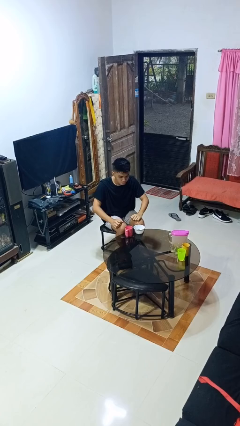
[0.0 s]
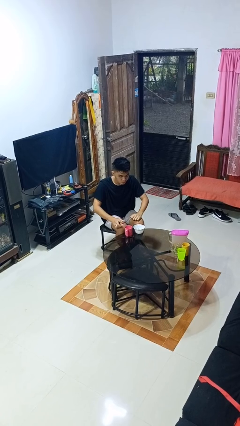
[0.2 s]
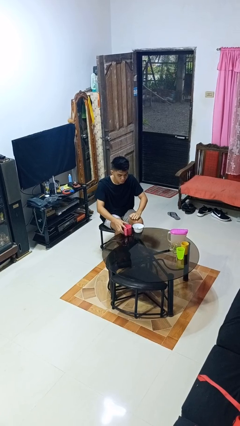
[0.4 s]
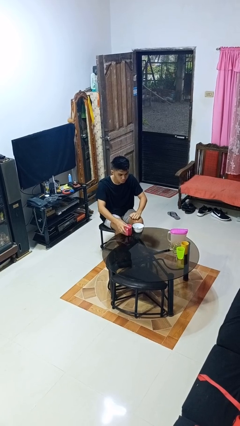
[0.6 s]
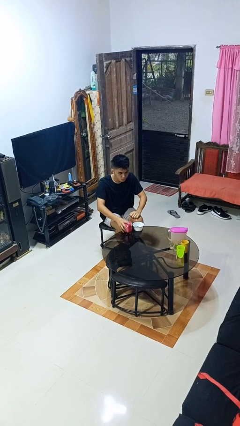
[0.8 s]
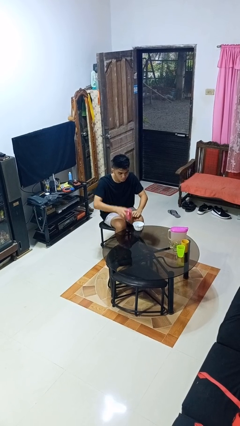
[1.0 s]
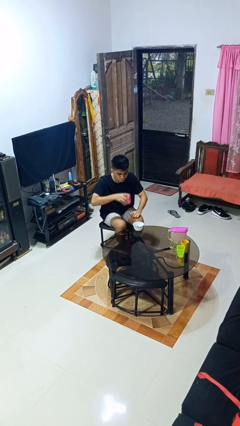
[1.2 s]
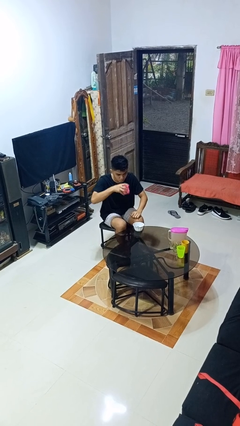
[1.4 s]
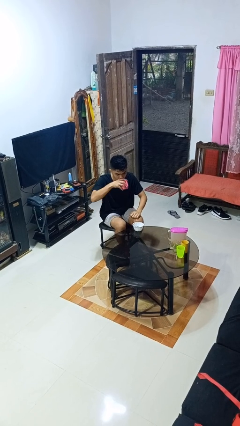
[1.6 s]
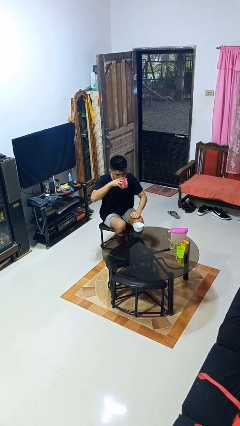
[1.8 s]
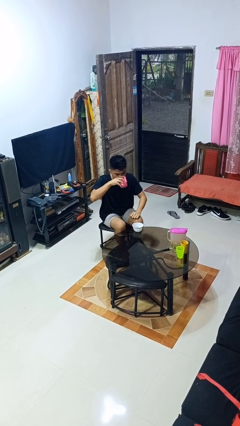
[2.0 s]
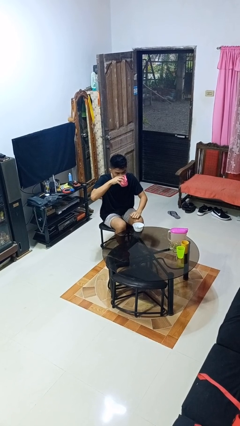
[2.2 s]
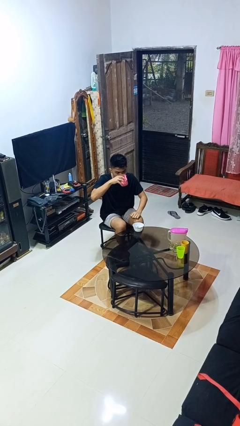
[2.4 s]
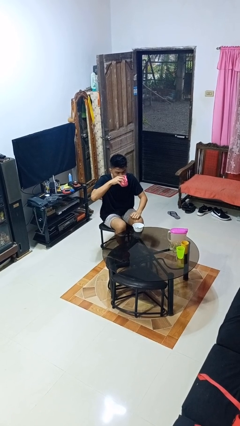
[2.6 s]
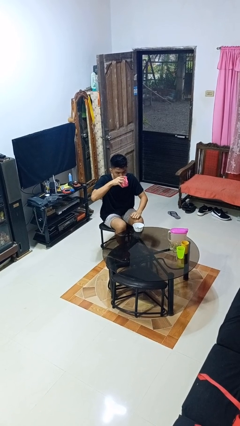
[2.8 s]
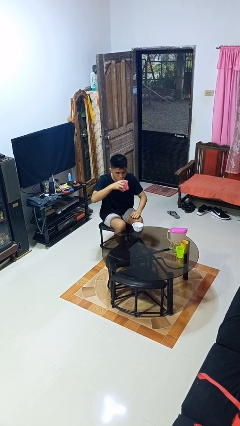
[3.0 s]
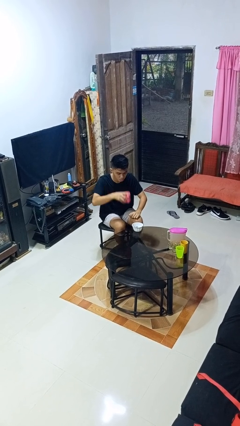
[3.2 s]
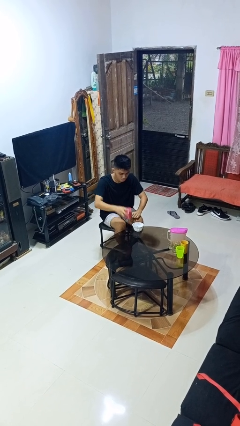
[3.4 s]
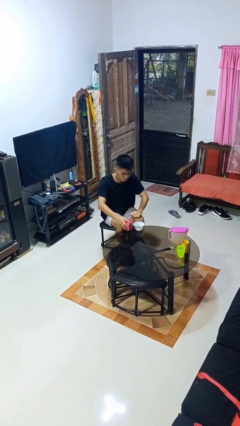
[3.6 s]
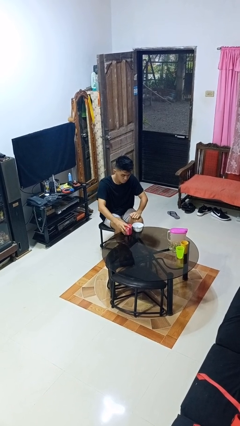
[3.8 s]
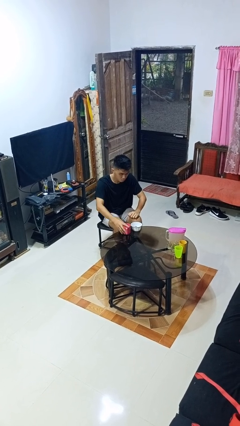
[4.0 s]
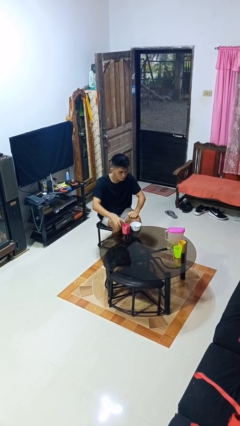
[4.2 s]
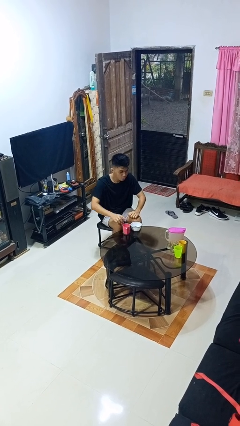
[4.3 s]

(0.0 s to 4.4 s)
person drinks from cup

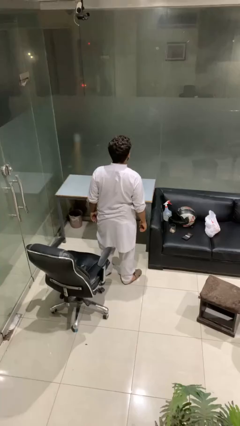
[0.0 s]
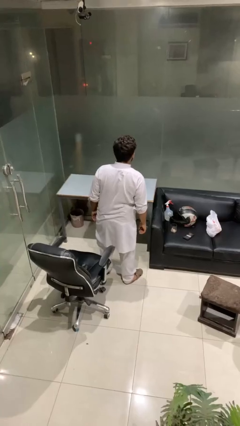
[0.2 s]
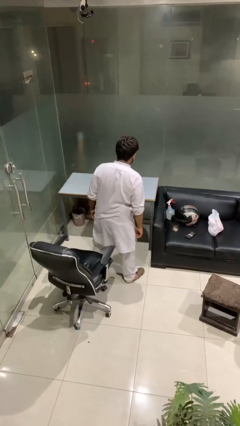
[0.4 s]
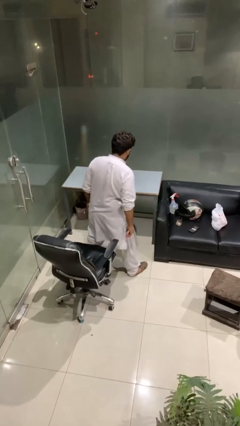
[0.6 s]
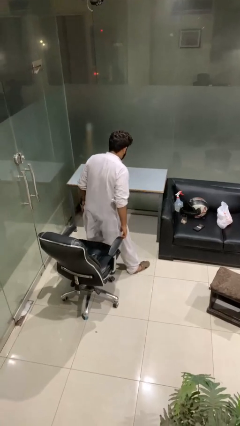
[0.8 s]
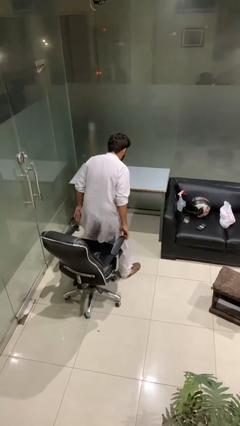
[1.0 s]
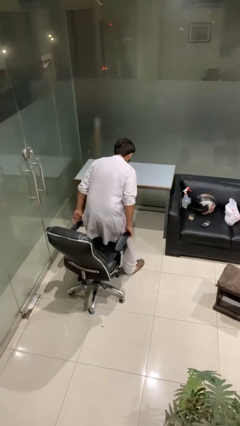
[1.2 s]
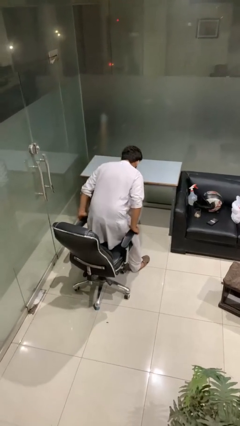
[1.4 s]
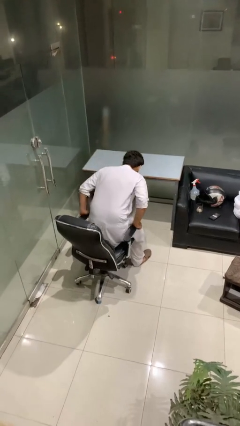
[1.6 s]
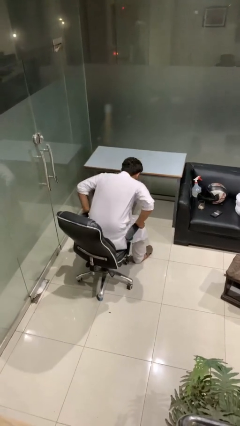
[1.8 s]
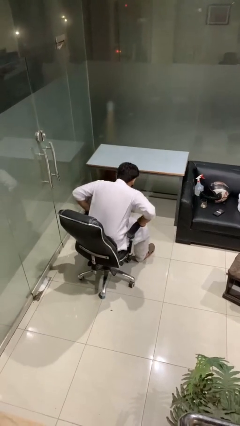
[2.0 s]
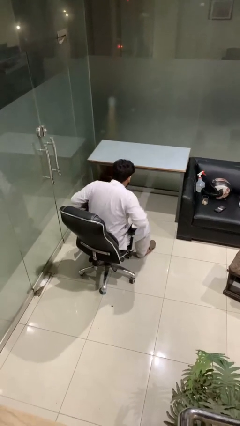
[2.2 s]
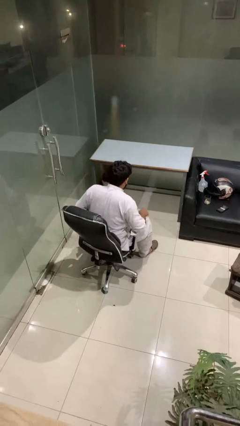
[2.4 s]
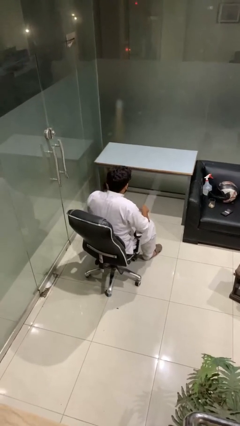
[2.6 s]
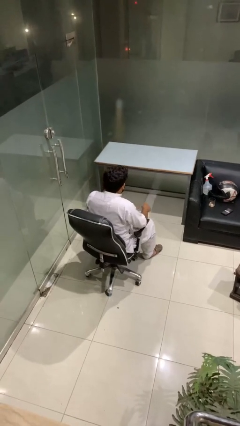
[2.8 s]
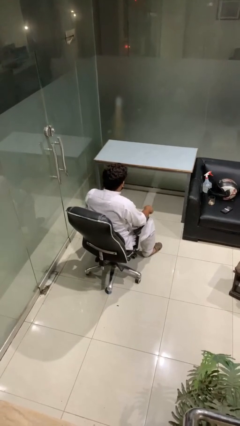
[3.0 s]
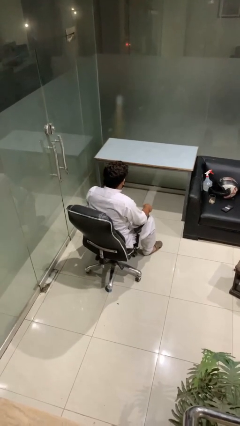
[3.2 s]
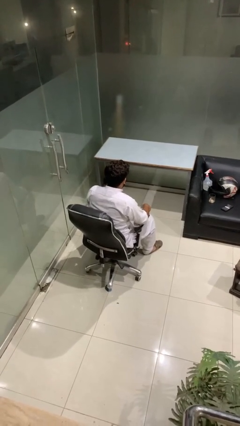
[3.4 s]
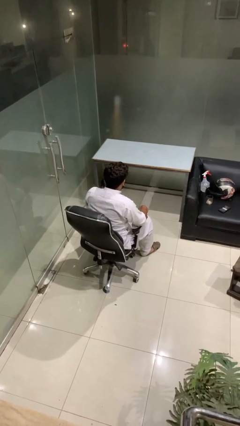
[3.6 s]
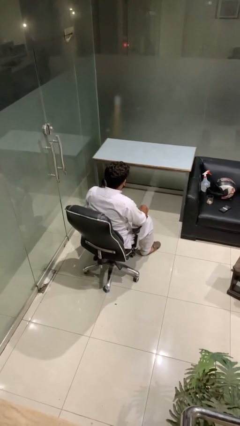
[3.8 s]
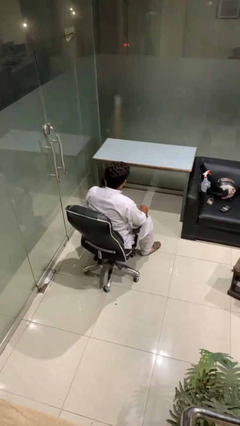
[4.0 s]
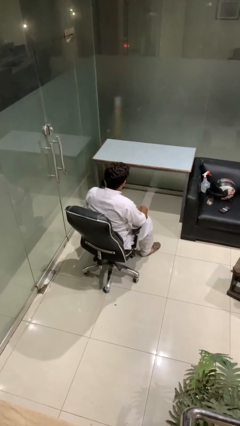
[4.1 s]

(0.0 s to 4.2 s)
person sits down

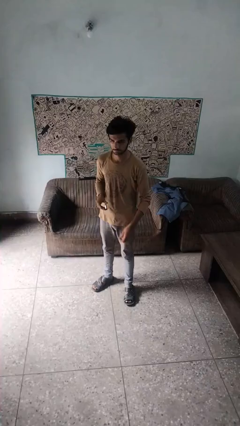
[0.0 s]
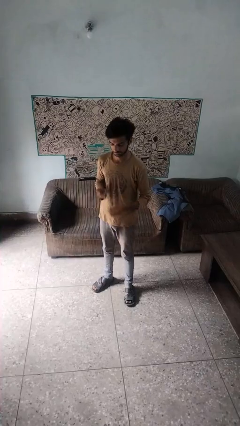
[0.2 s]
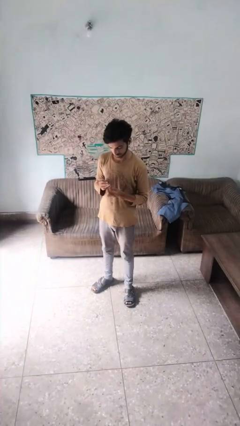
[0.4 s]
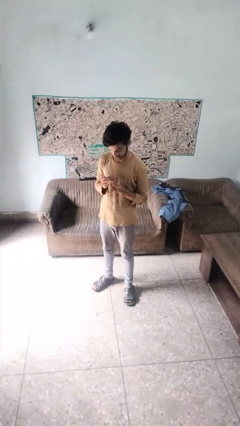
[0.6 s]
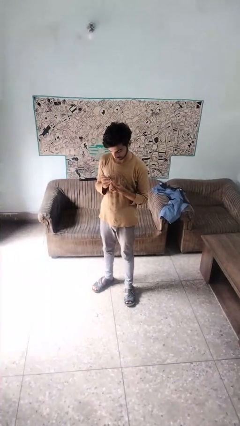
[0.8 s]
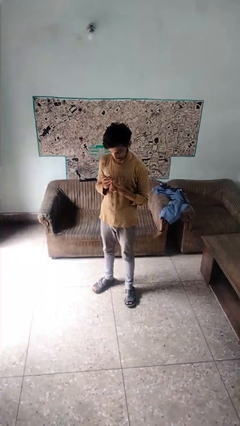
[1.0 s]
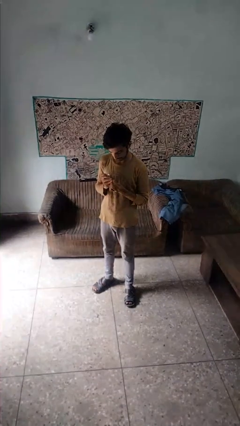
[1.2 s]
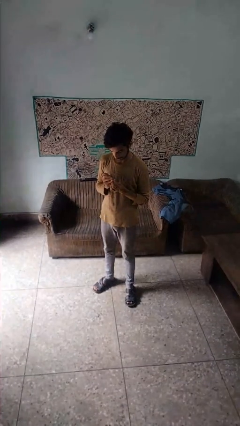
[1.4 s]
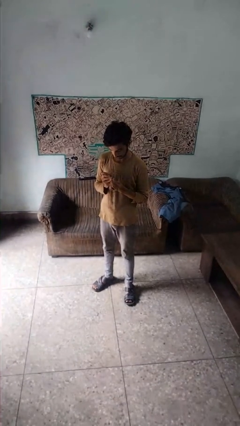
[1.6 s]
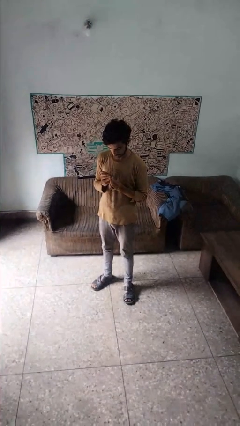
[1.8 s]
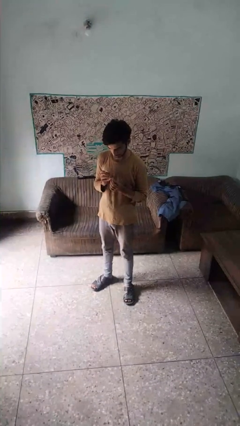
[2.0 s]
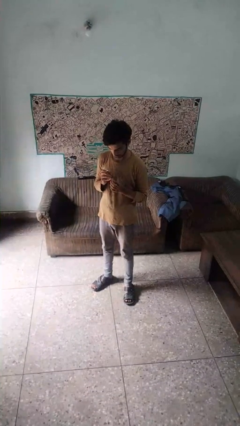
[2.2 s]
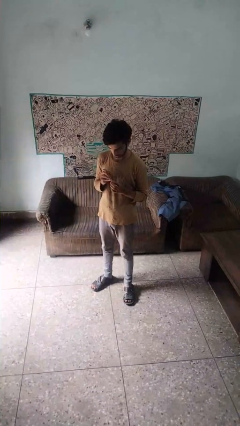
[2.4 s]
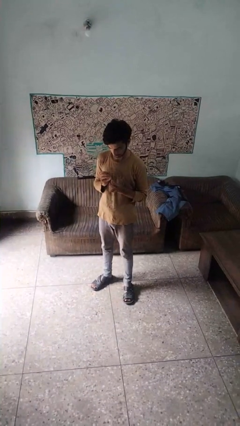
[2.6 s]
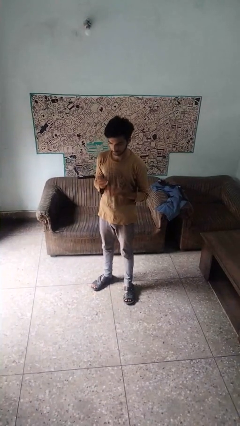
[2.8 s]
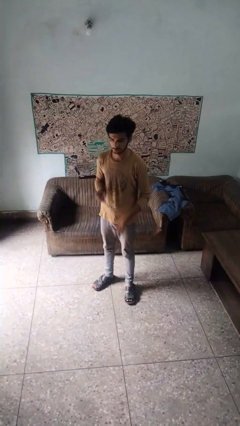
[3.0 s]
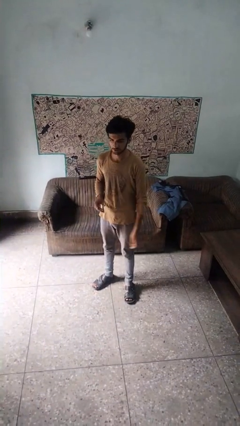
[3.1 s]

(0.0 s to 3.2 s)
person clips fingernails

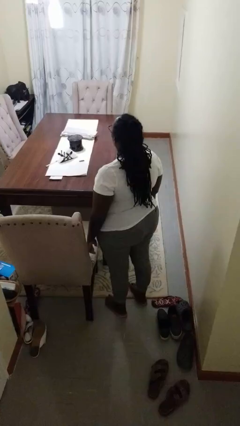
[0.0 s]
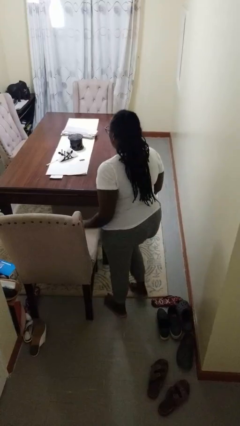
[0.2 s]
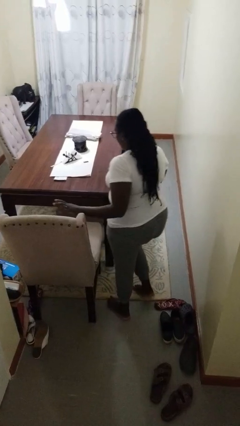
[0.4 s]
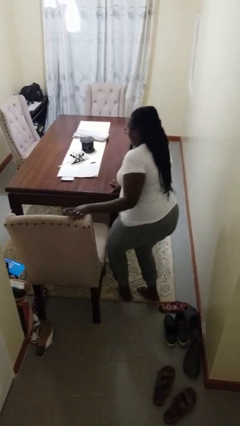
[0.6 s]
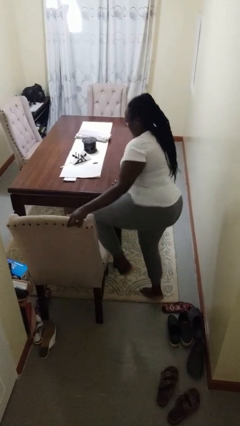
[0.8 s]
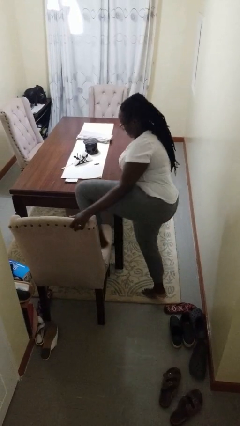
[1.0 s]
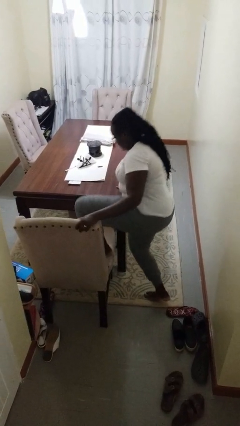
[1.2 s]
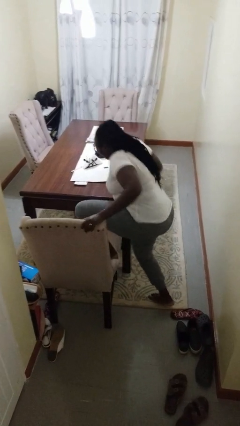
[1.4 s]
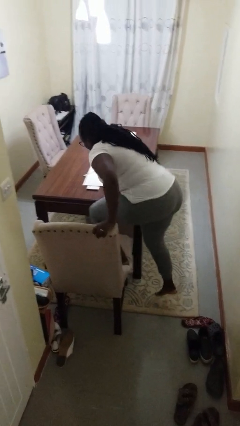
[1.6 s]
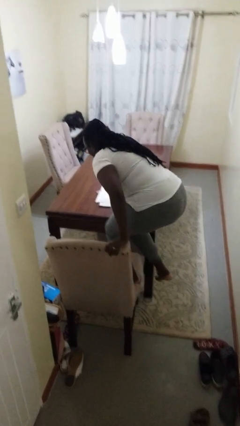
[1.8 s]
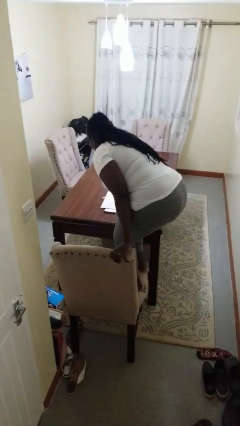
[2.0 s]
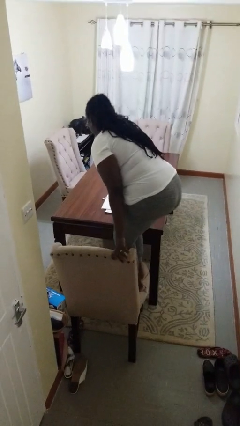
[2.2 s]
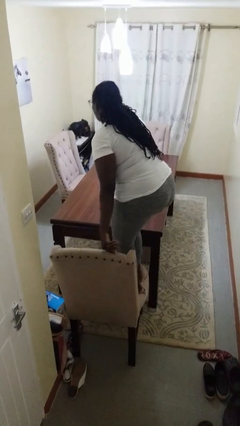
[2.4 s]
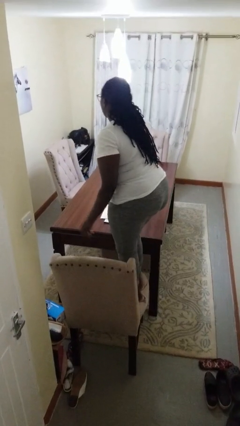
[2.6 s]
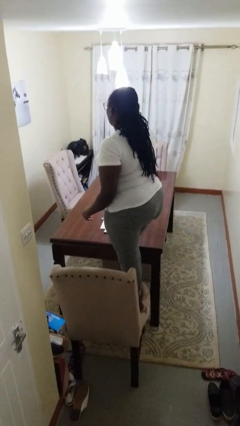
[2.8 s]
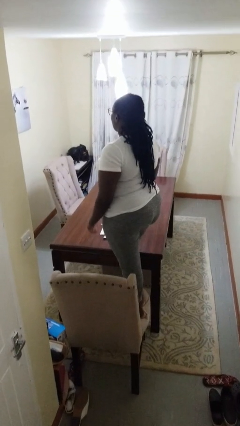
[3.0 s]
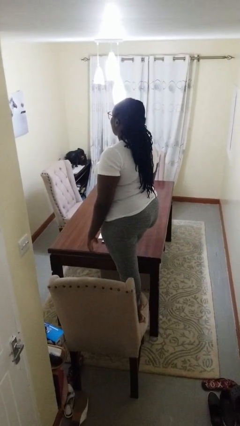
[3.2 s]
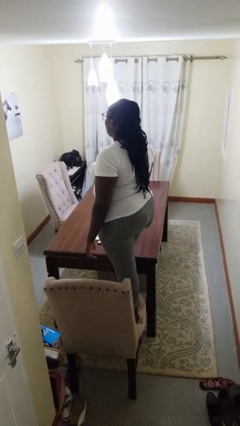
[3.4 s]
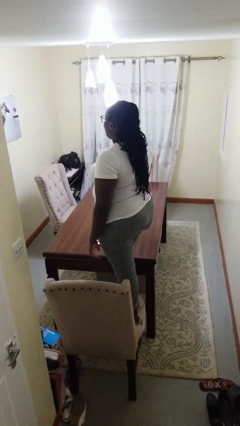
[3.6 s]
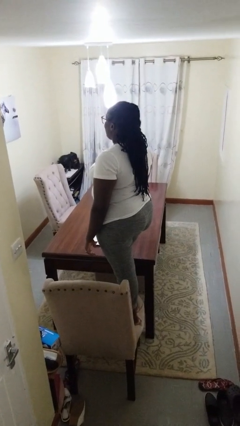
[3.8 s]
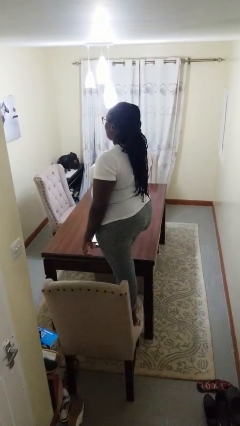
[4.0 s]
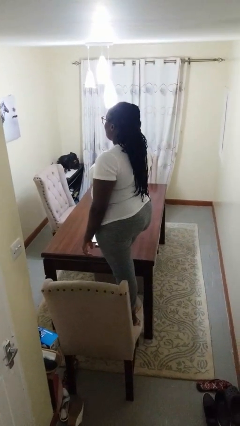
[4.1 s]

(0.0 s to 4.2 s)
person climbs on chair

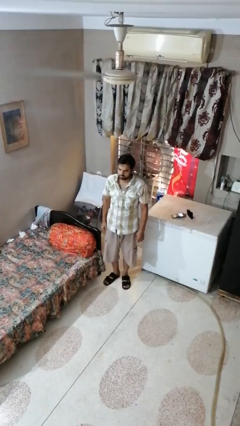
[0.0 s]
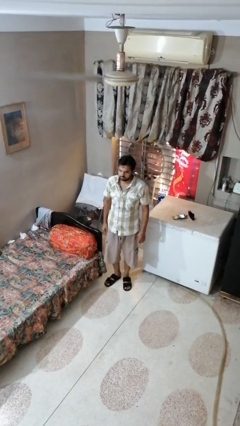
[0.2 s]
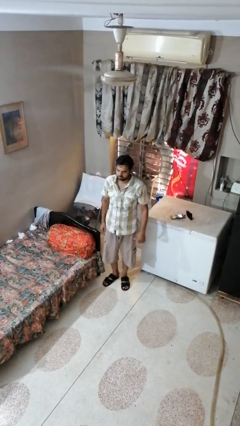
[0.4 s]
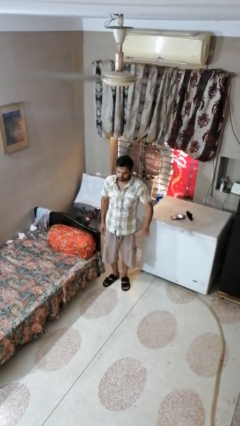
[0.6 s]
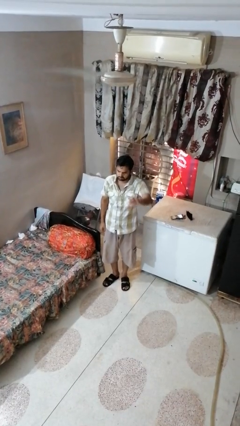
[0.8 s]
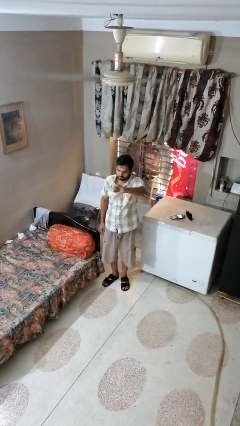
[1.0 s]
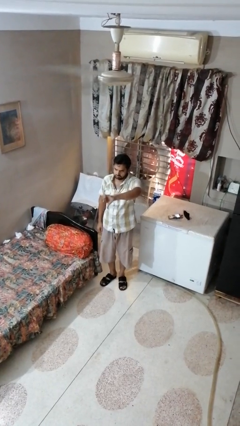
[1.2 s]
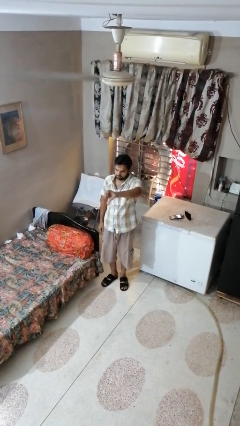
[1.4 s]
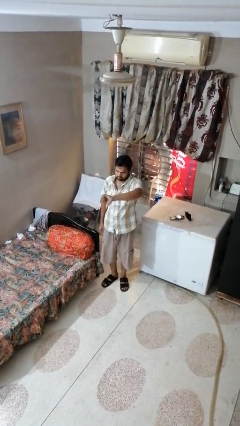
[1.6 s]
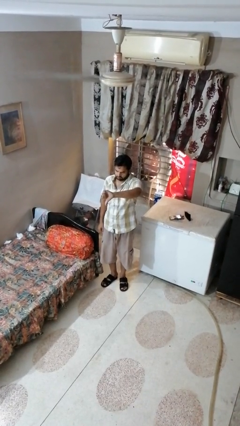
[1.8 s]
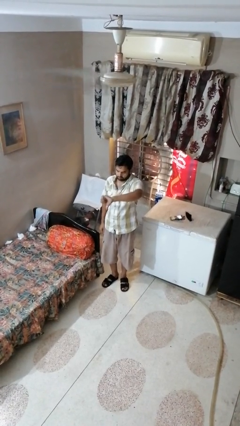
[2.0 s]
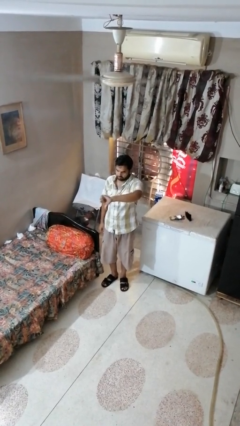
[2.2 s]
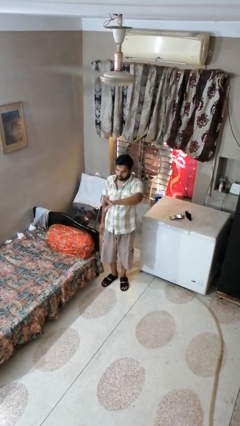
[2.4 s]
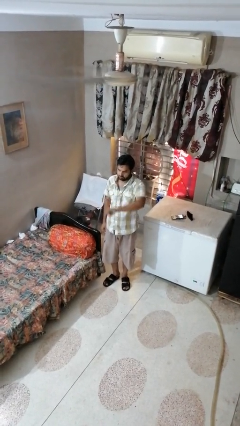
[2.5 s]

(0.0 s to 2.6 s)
person gestures thumbs down
